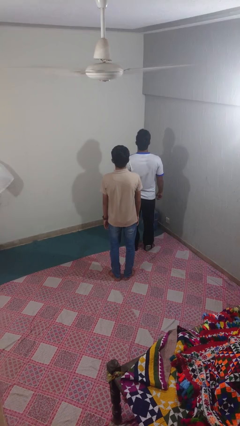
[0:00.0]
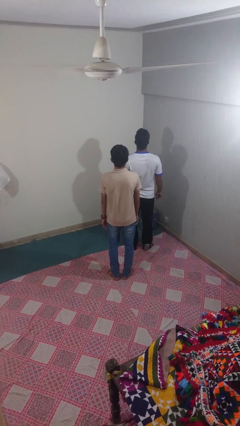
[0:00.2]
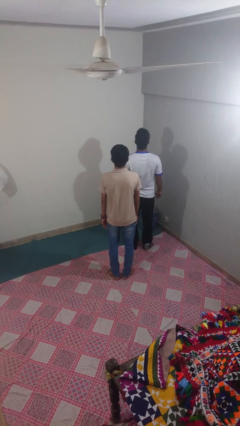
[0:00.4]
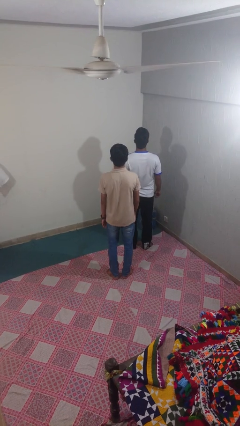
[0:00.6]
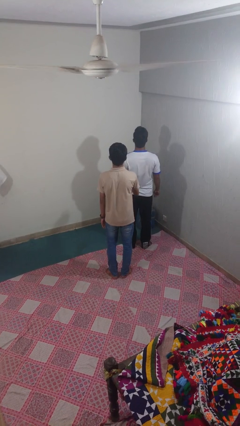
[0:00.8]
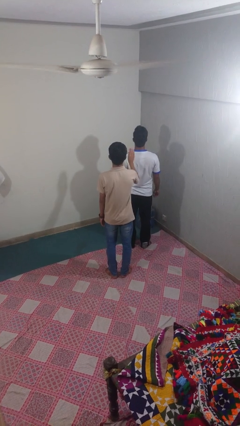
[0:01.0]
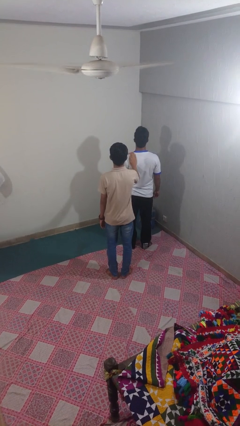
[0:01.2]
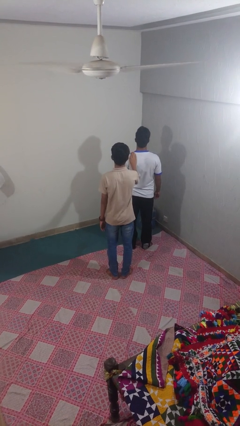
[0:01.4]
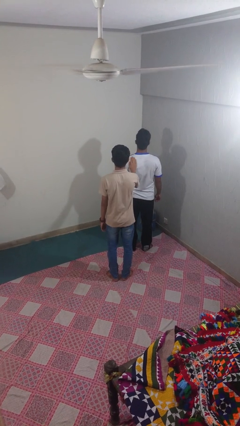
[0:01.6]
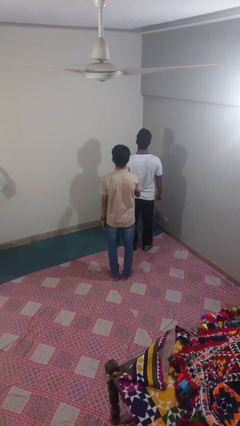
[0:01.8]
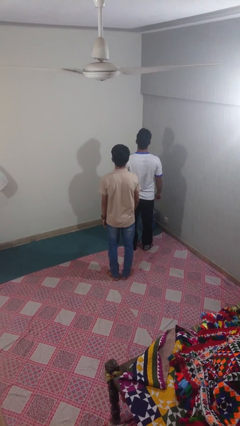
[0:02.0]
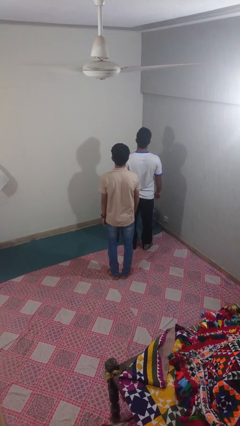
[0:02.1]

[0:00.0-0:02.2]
person touches back of person

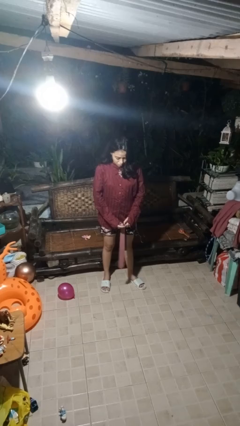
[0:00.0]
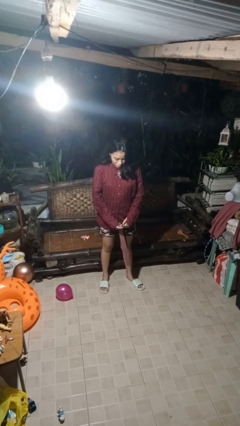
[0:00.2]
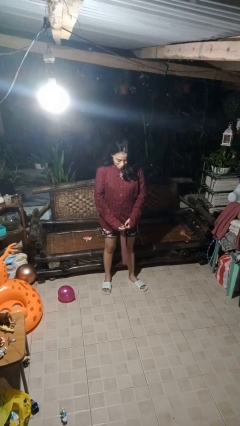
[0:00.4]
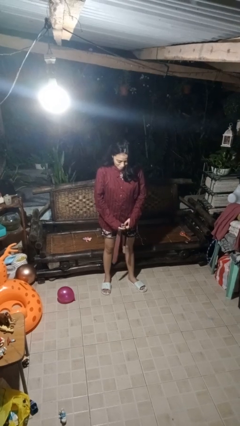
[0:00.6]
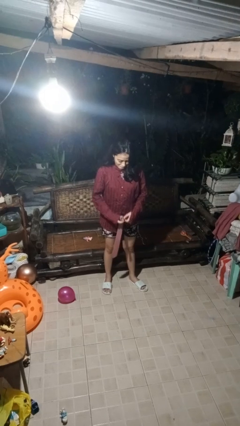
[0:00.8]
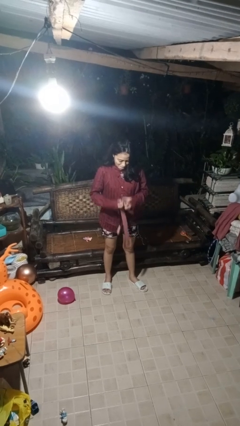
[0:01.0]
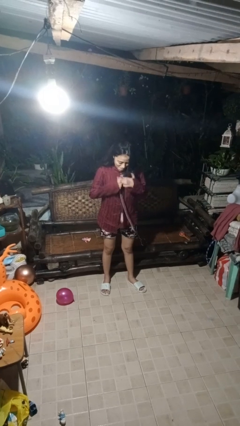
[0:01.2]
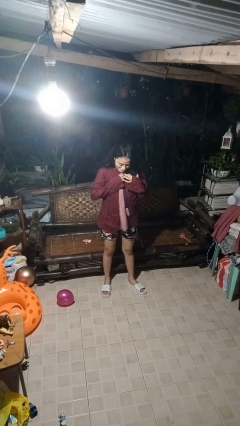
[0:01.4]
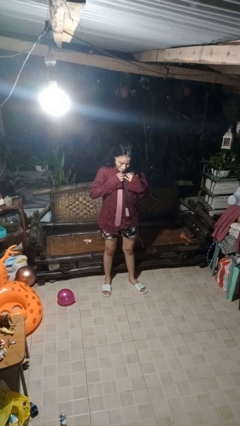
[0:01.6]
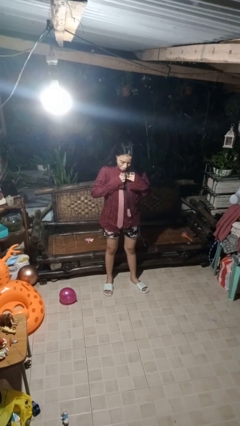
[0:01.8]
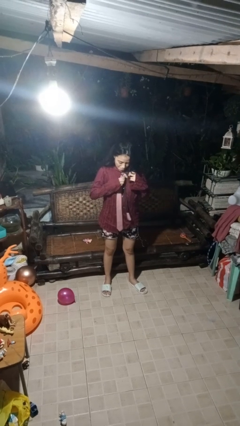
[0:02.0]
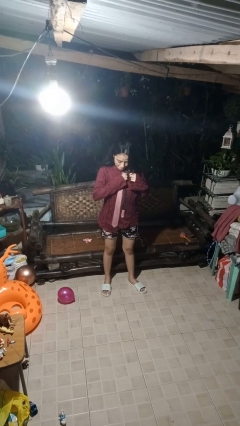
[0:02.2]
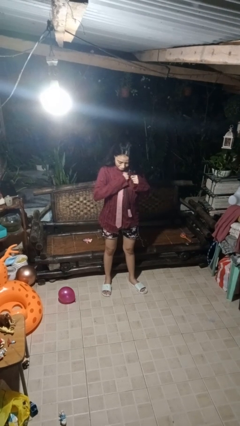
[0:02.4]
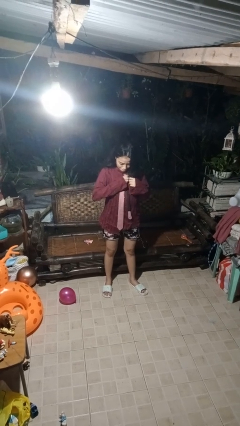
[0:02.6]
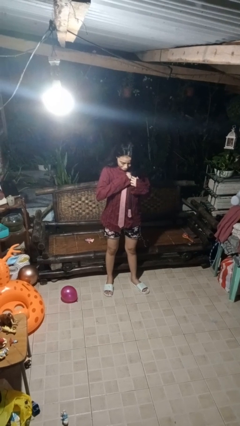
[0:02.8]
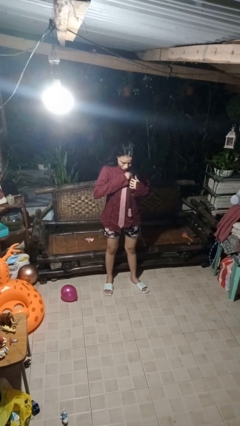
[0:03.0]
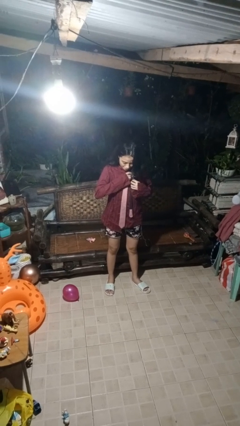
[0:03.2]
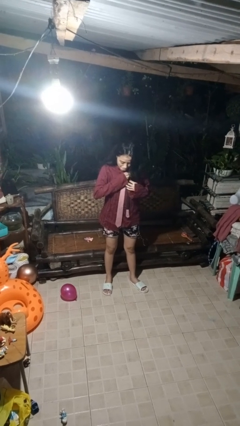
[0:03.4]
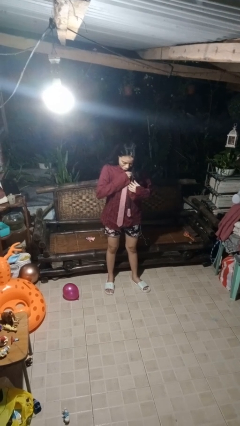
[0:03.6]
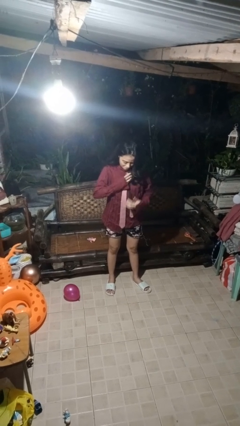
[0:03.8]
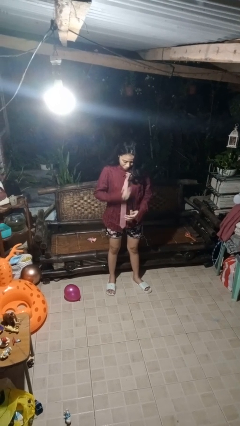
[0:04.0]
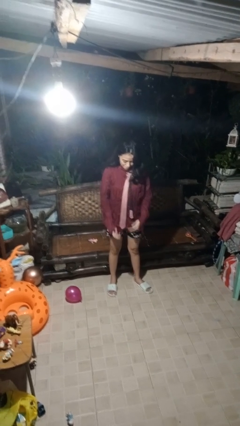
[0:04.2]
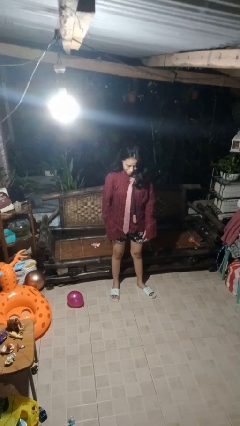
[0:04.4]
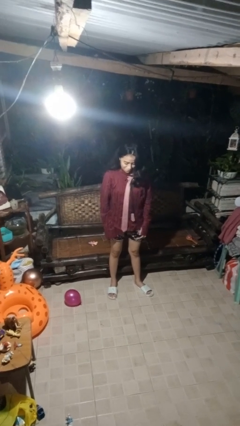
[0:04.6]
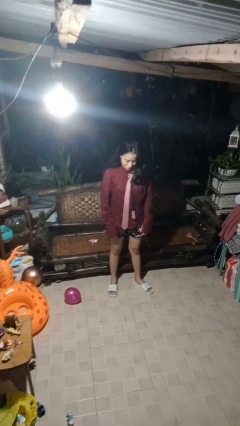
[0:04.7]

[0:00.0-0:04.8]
person puts on necktie

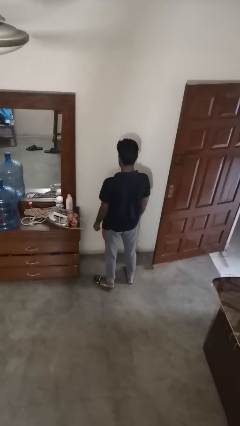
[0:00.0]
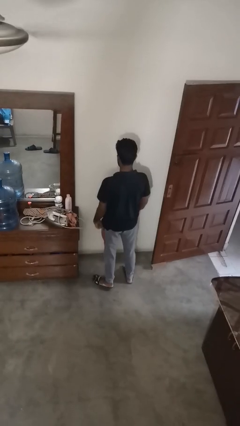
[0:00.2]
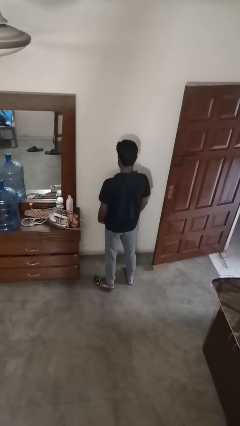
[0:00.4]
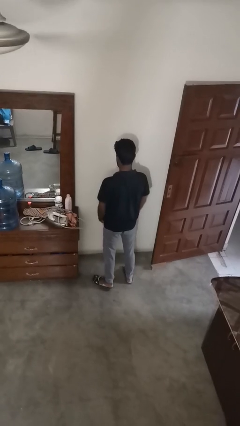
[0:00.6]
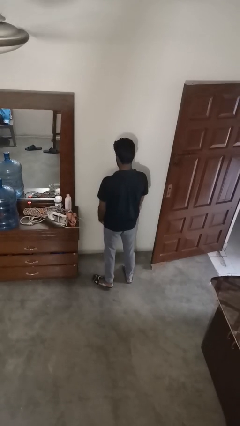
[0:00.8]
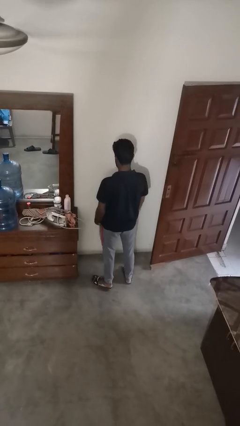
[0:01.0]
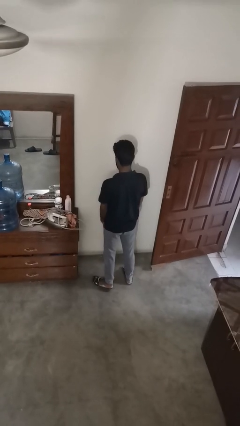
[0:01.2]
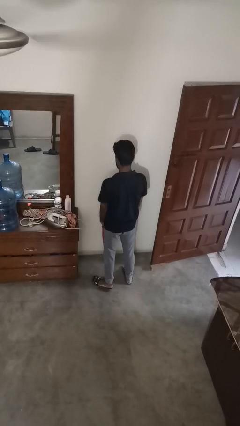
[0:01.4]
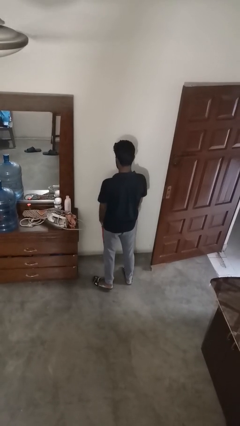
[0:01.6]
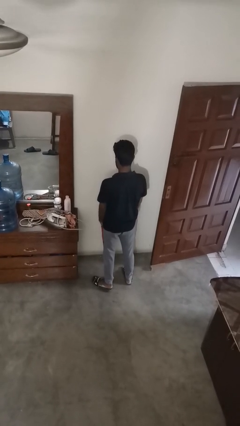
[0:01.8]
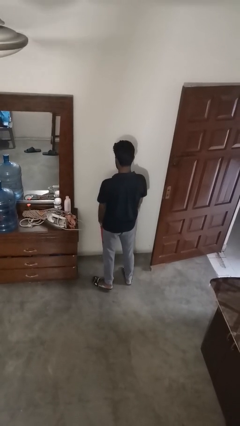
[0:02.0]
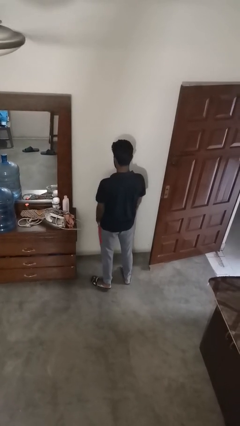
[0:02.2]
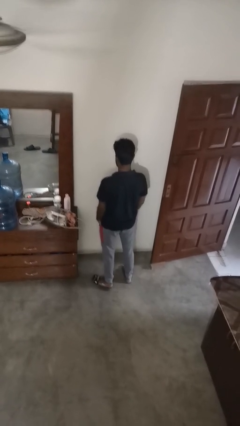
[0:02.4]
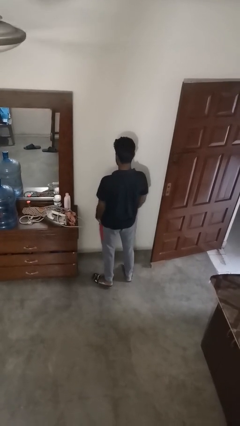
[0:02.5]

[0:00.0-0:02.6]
person puts hands in back pockets

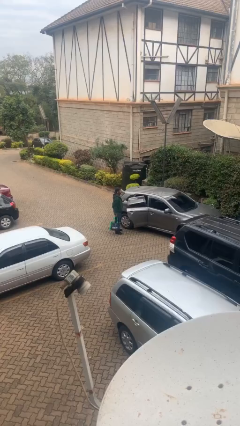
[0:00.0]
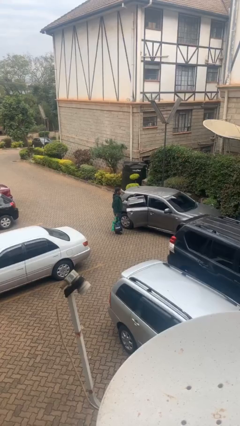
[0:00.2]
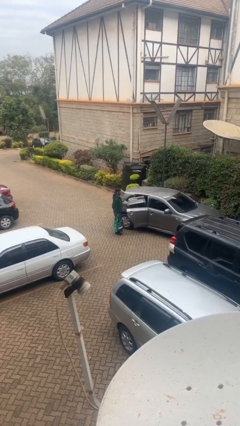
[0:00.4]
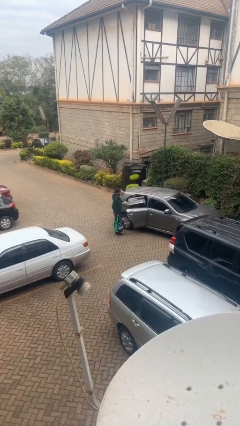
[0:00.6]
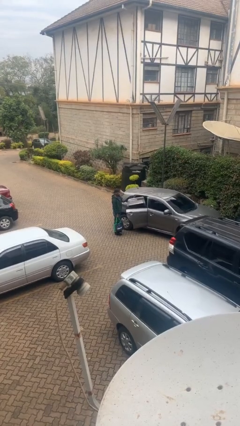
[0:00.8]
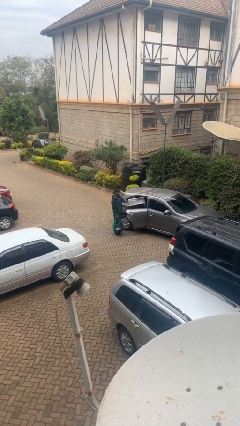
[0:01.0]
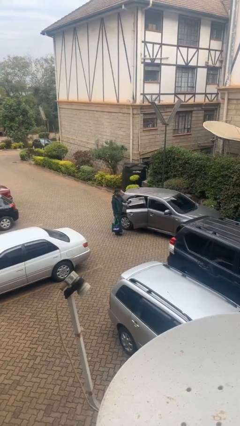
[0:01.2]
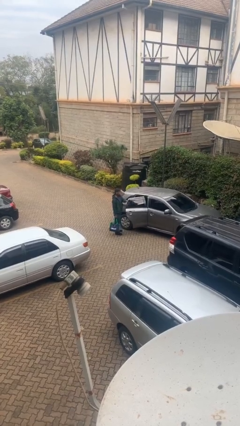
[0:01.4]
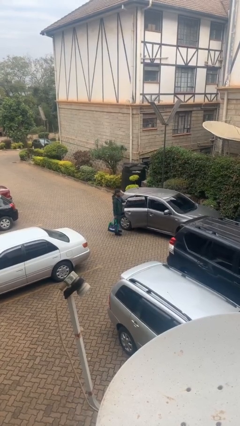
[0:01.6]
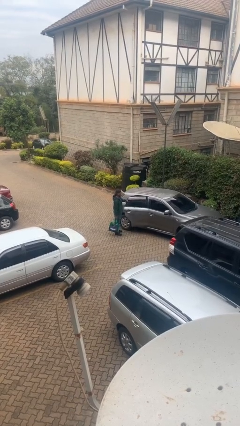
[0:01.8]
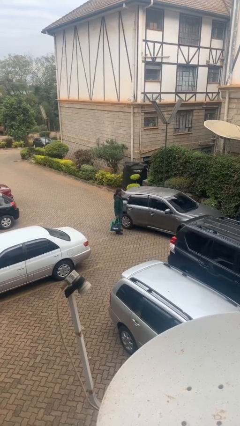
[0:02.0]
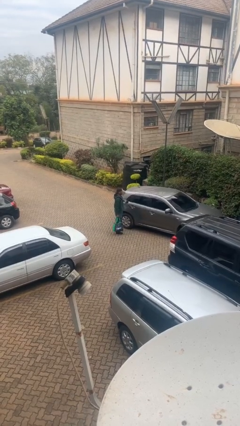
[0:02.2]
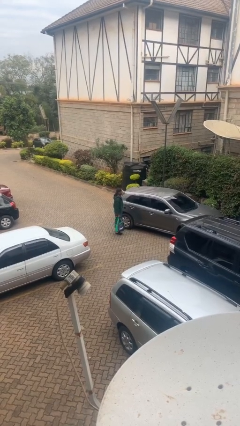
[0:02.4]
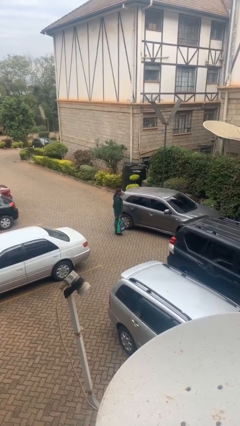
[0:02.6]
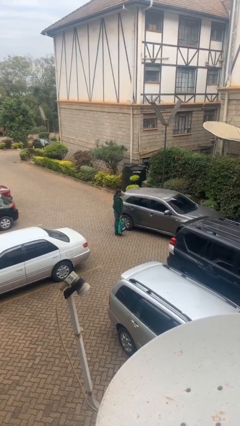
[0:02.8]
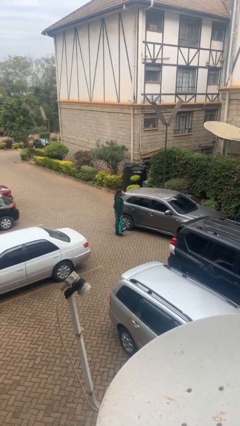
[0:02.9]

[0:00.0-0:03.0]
person closes car door

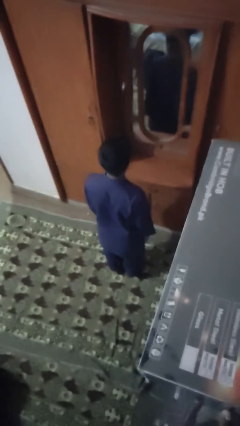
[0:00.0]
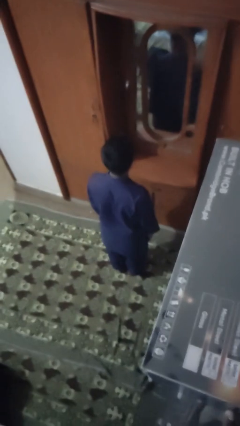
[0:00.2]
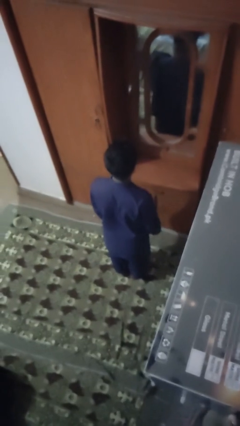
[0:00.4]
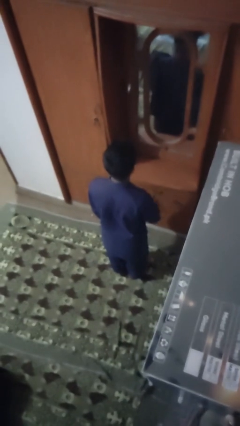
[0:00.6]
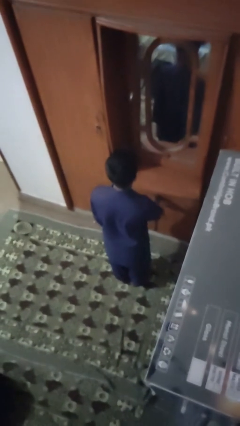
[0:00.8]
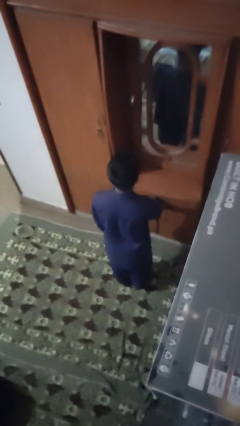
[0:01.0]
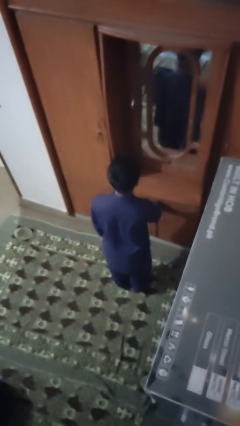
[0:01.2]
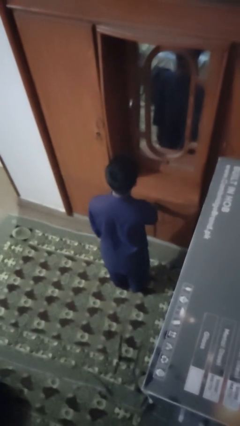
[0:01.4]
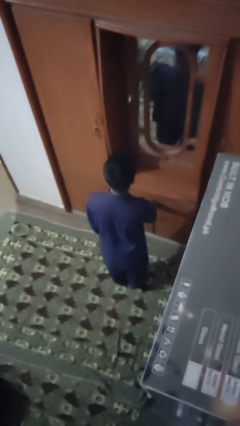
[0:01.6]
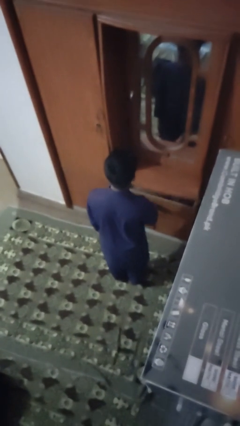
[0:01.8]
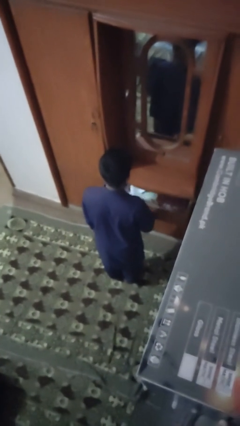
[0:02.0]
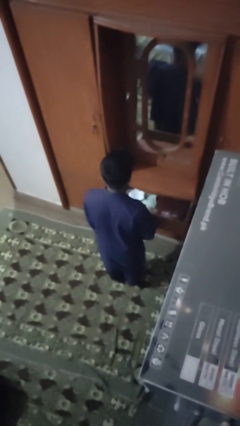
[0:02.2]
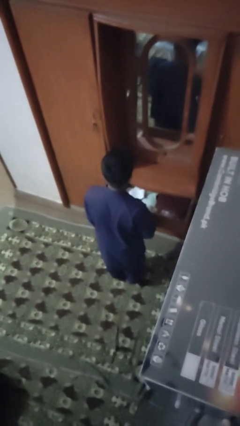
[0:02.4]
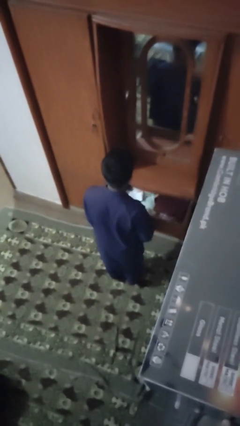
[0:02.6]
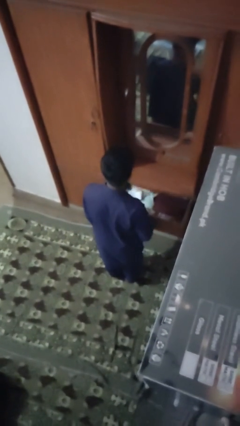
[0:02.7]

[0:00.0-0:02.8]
person opens dresser drawer

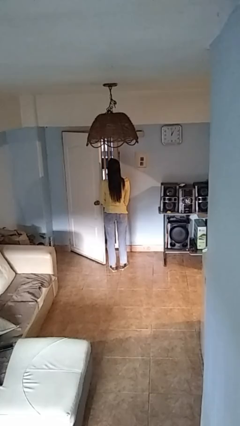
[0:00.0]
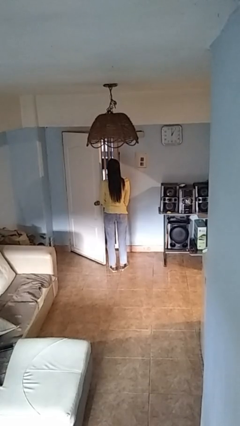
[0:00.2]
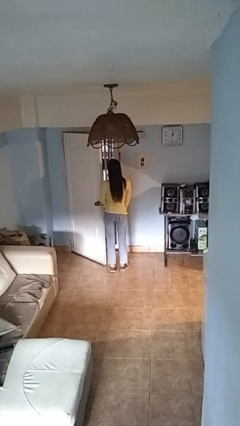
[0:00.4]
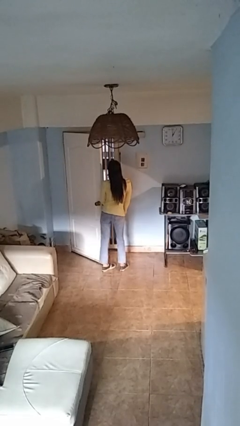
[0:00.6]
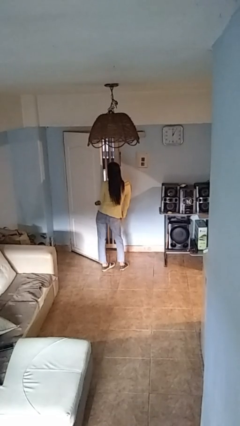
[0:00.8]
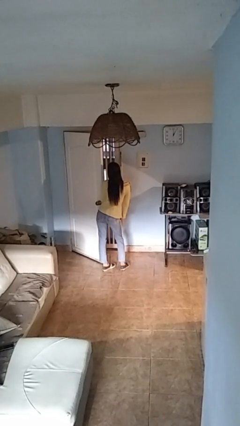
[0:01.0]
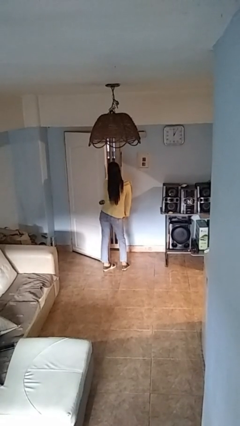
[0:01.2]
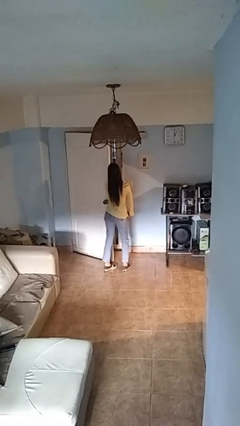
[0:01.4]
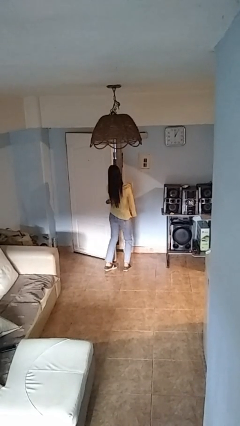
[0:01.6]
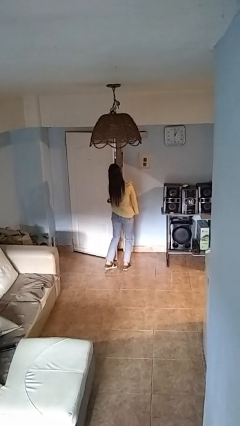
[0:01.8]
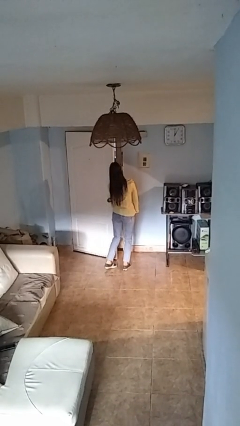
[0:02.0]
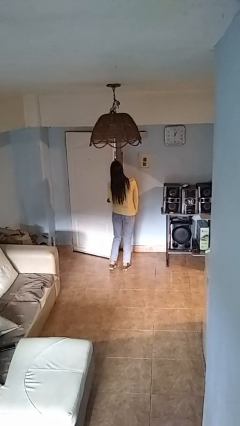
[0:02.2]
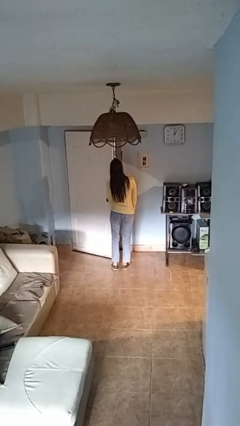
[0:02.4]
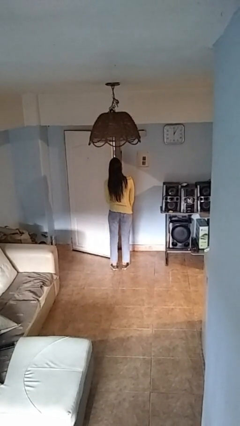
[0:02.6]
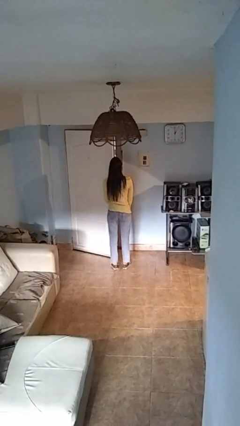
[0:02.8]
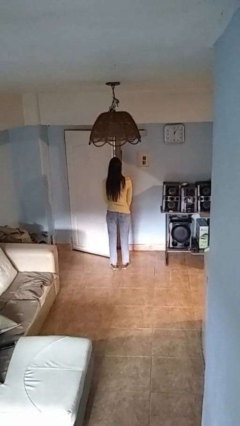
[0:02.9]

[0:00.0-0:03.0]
person closes door with hip
